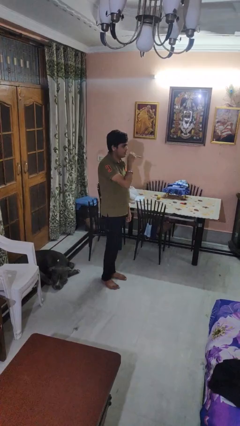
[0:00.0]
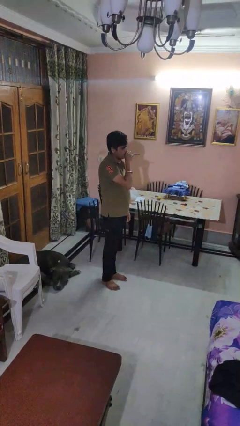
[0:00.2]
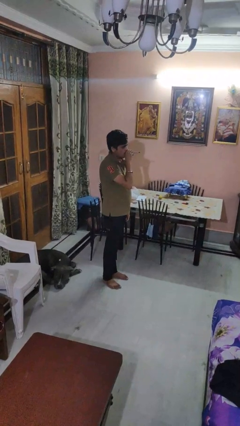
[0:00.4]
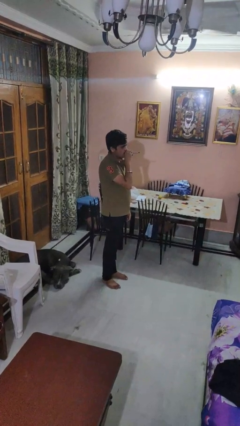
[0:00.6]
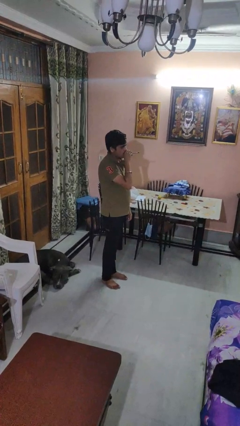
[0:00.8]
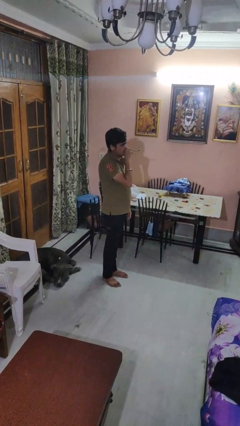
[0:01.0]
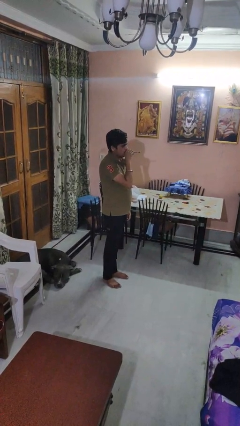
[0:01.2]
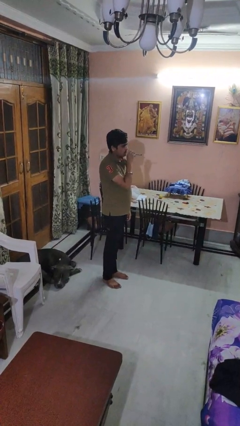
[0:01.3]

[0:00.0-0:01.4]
person vapes

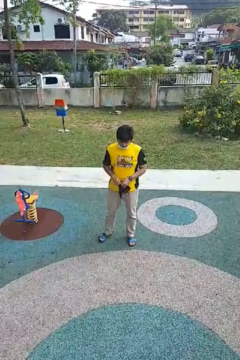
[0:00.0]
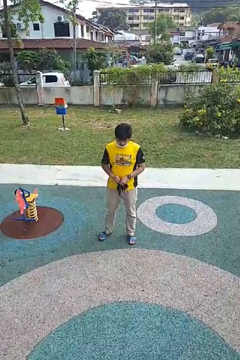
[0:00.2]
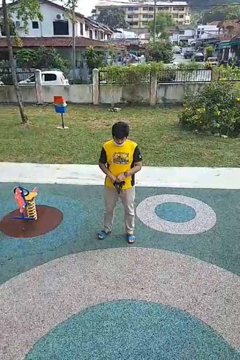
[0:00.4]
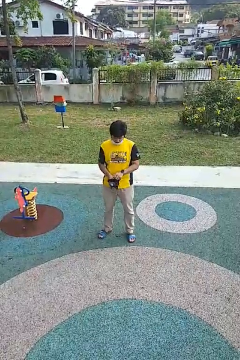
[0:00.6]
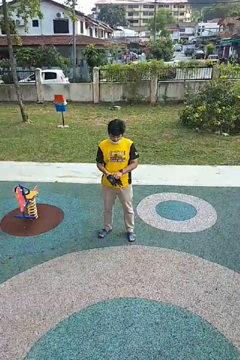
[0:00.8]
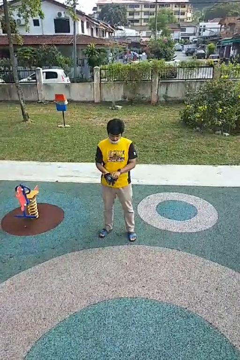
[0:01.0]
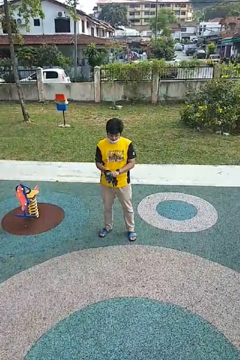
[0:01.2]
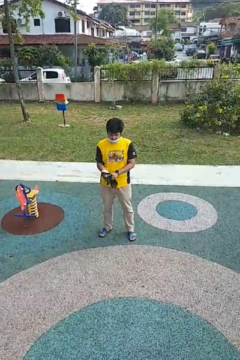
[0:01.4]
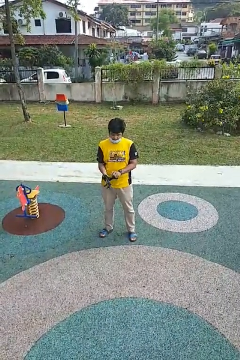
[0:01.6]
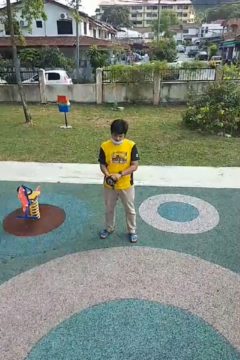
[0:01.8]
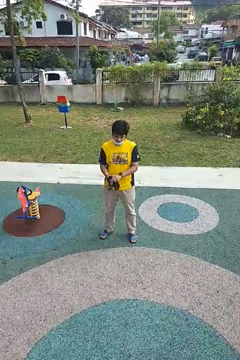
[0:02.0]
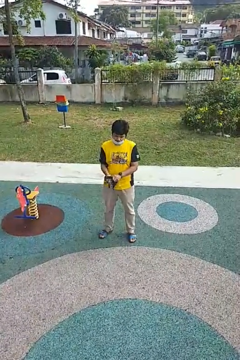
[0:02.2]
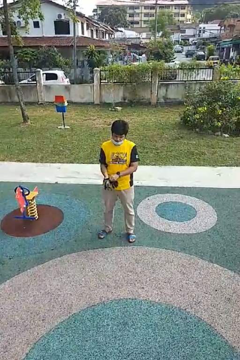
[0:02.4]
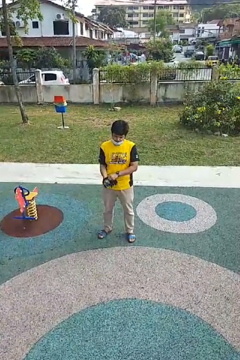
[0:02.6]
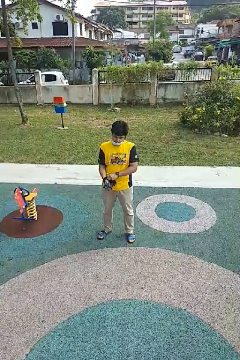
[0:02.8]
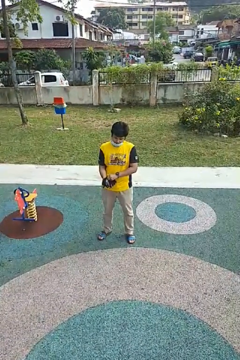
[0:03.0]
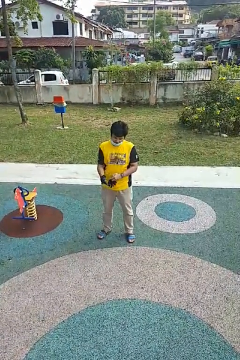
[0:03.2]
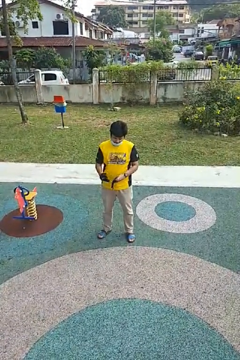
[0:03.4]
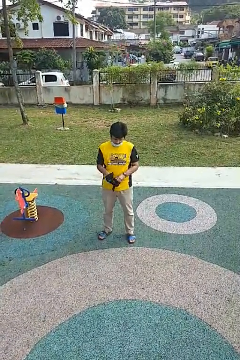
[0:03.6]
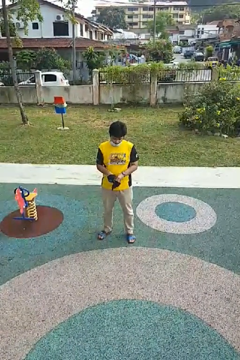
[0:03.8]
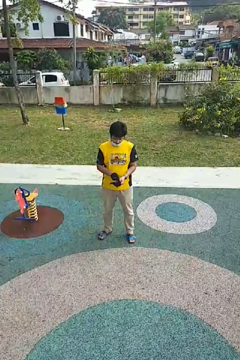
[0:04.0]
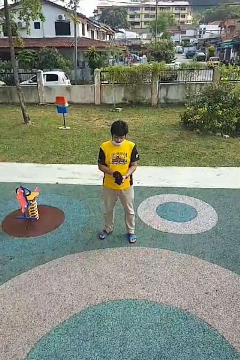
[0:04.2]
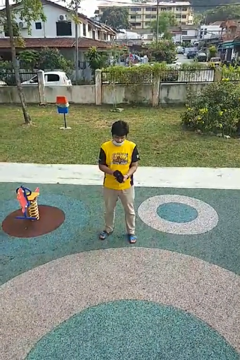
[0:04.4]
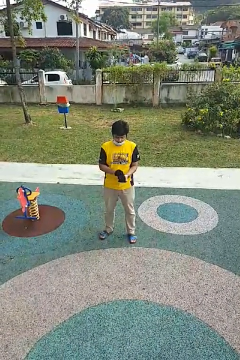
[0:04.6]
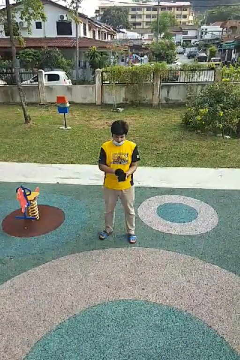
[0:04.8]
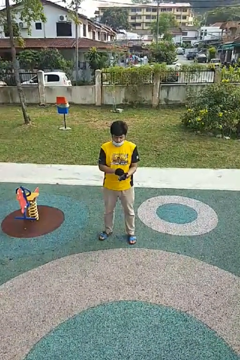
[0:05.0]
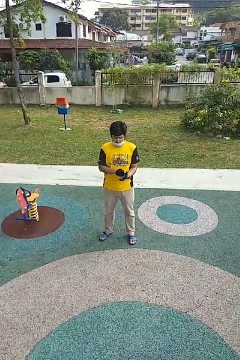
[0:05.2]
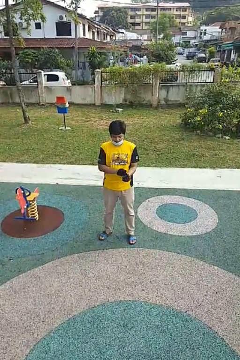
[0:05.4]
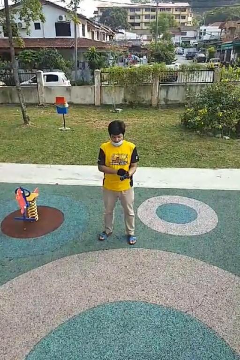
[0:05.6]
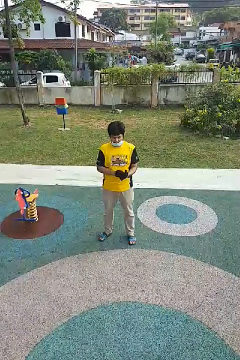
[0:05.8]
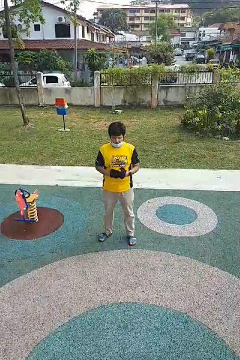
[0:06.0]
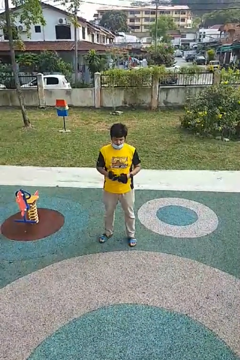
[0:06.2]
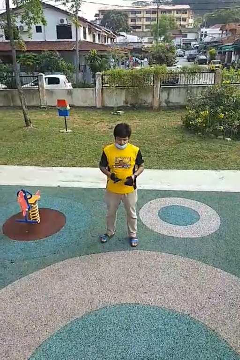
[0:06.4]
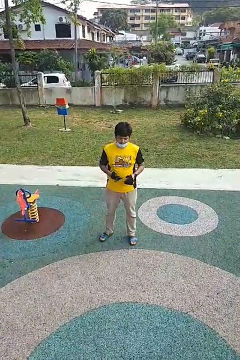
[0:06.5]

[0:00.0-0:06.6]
person puts on gloves

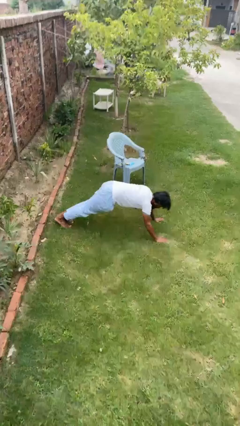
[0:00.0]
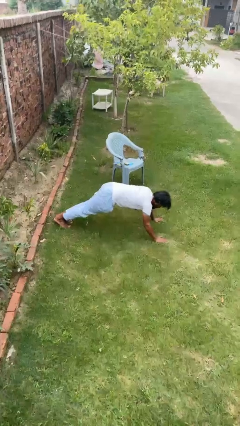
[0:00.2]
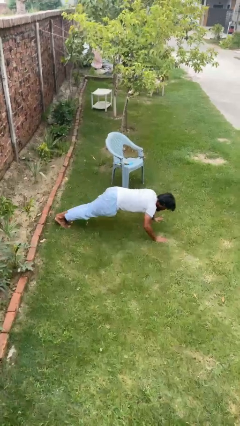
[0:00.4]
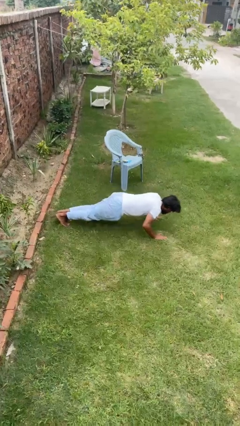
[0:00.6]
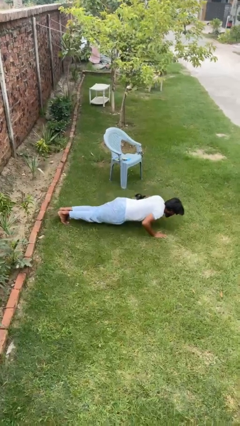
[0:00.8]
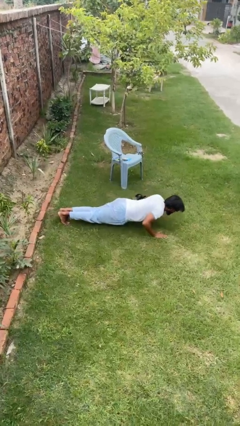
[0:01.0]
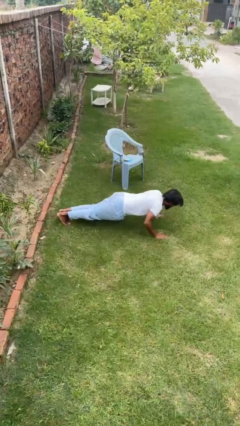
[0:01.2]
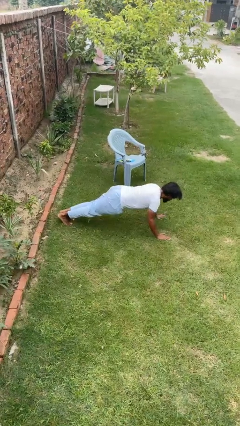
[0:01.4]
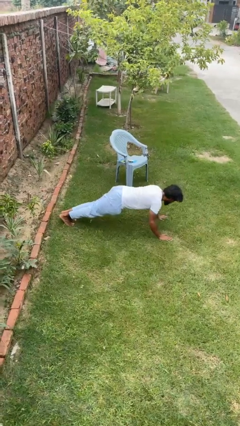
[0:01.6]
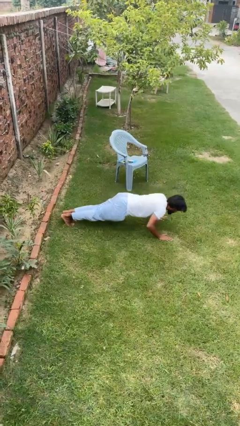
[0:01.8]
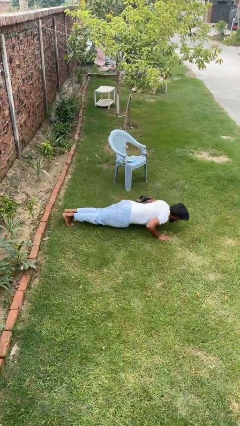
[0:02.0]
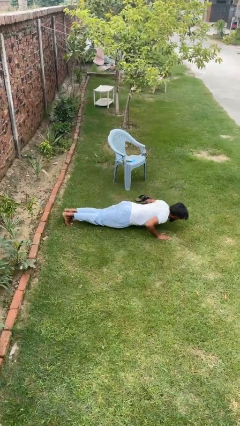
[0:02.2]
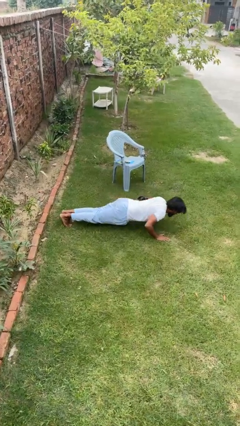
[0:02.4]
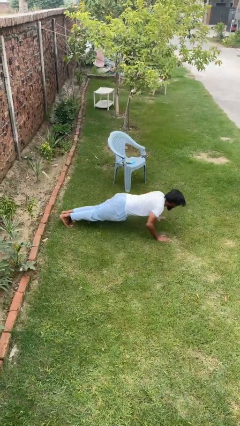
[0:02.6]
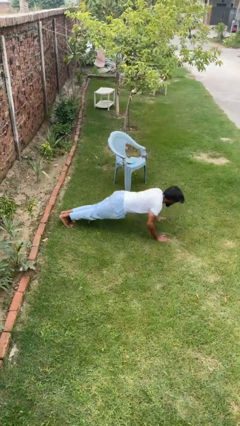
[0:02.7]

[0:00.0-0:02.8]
person exercises with pushup

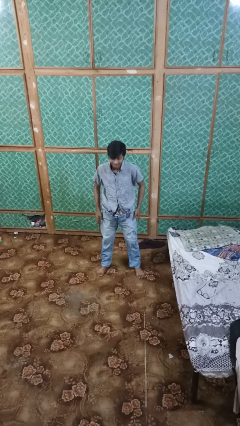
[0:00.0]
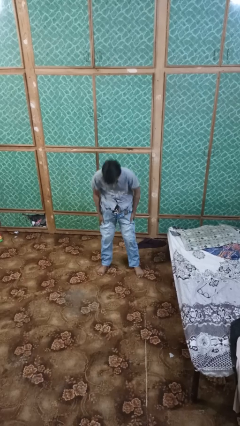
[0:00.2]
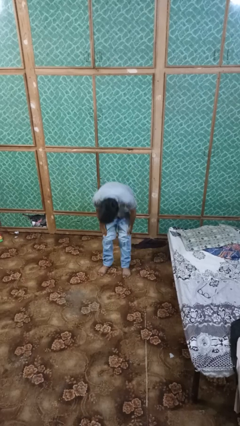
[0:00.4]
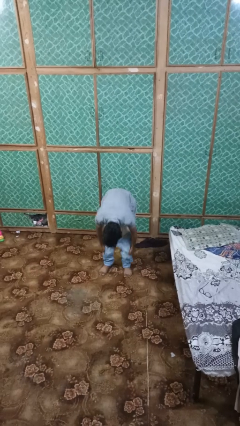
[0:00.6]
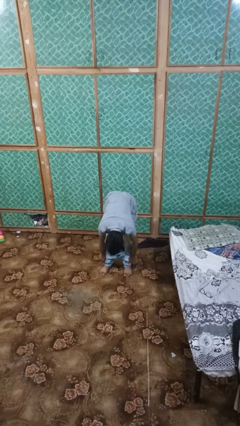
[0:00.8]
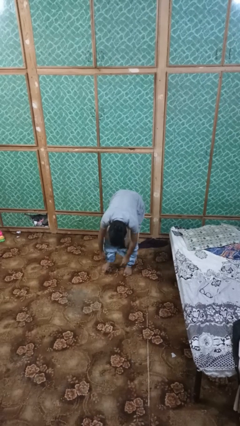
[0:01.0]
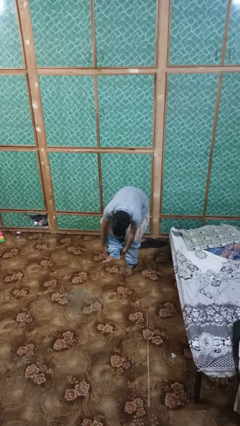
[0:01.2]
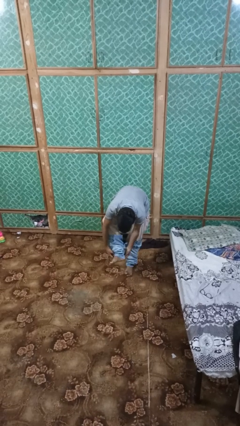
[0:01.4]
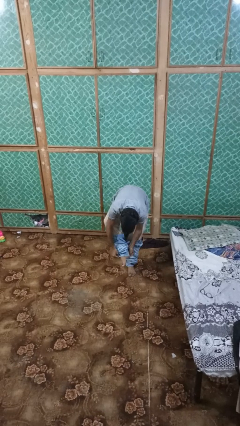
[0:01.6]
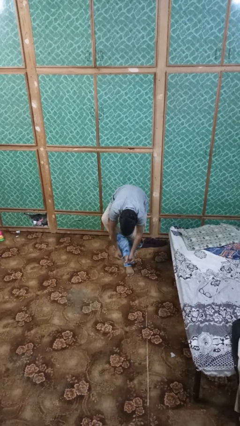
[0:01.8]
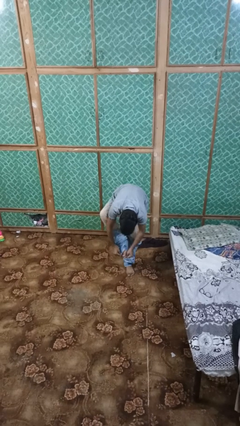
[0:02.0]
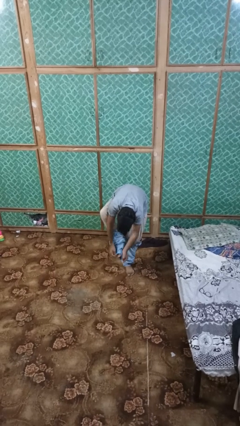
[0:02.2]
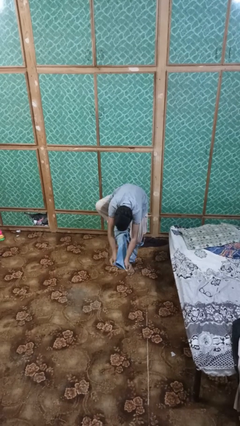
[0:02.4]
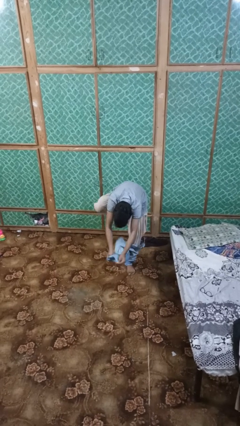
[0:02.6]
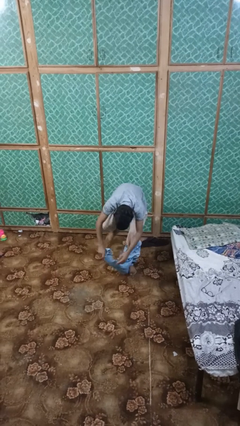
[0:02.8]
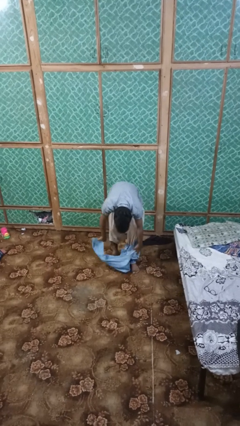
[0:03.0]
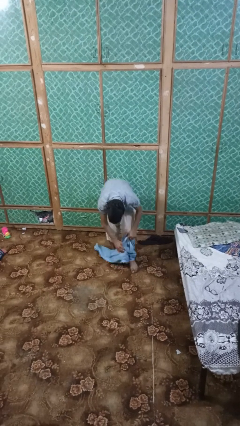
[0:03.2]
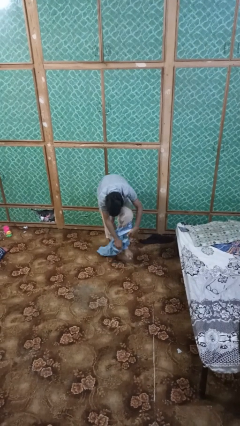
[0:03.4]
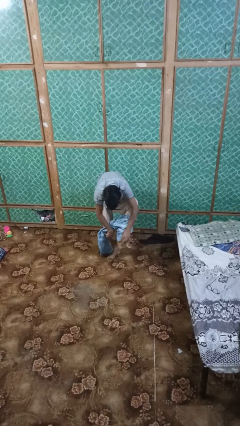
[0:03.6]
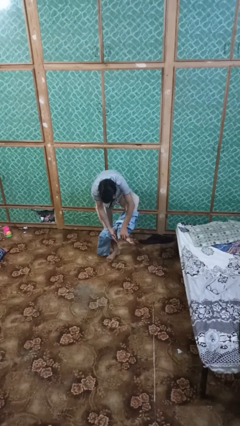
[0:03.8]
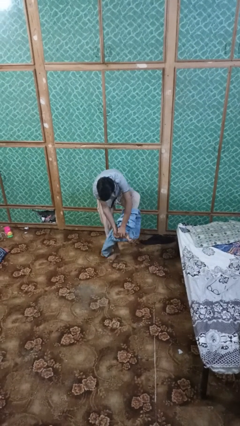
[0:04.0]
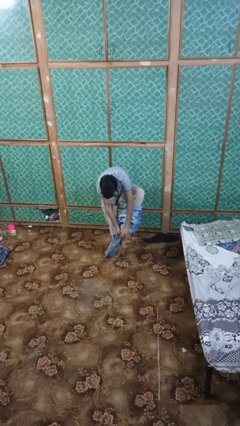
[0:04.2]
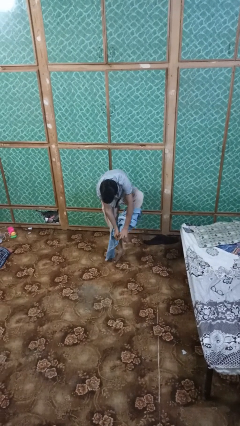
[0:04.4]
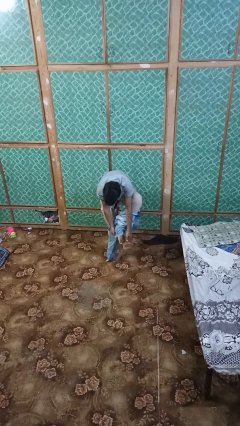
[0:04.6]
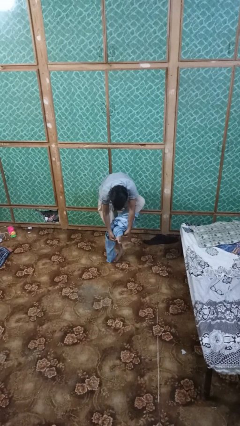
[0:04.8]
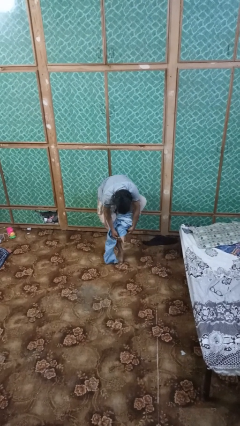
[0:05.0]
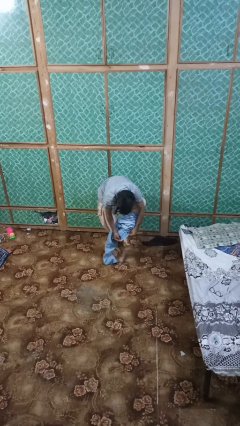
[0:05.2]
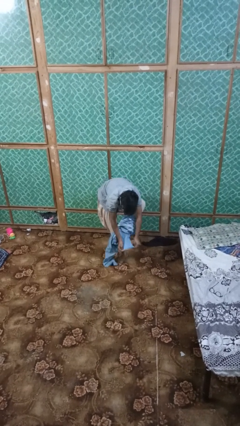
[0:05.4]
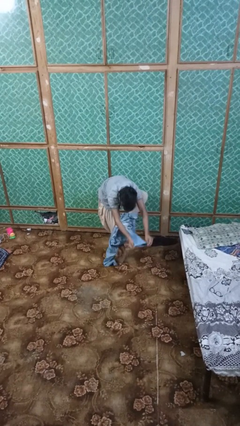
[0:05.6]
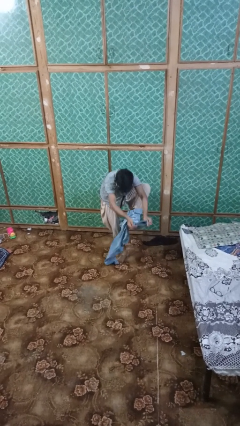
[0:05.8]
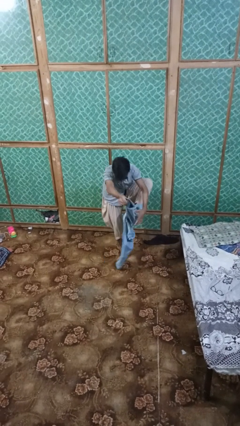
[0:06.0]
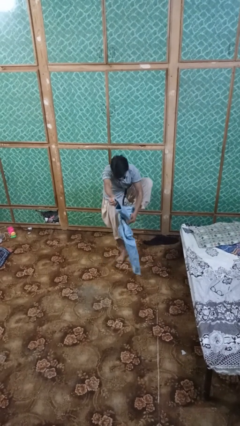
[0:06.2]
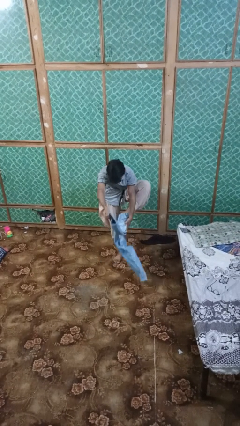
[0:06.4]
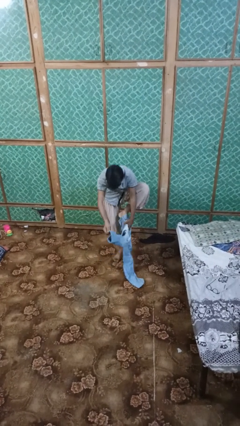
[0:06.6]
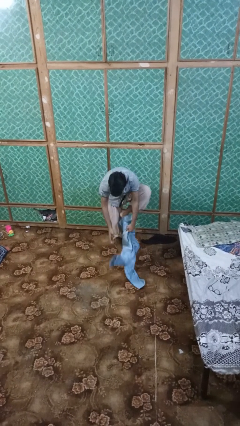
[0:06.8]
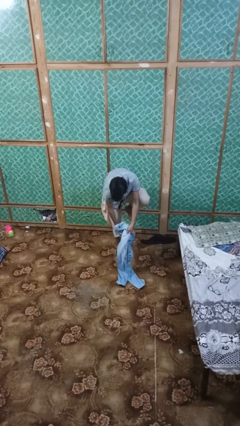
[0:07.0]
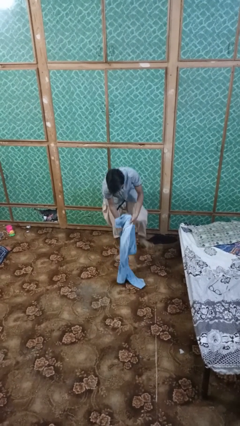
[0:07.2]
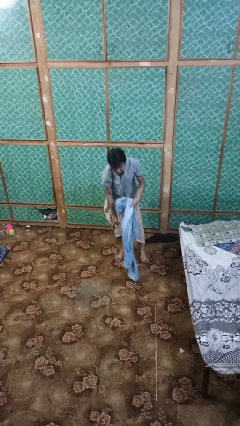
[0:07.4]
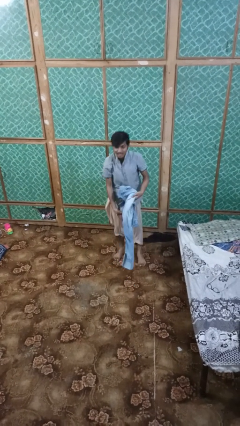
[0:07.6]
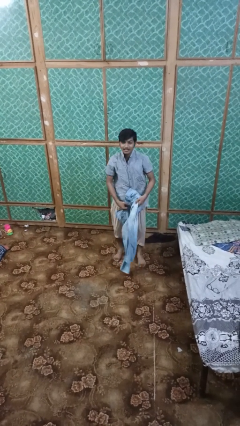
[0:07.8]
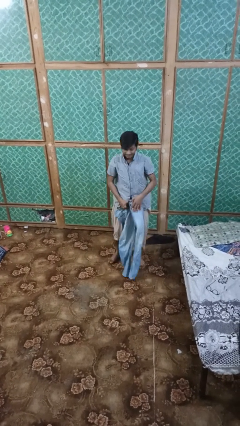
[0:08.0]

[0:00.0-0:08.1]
person takes off pants

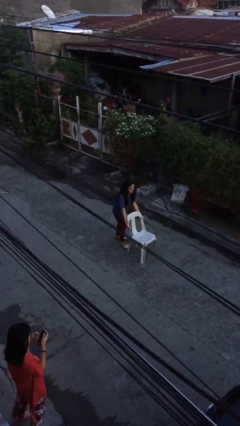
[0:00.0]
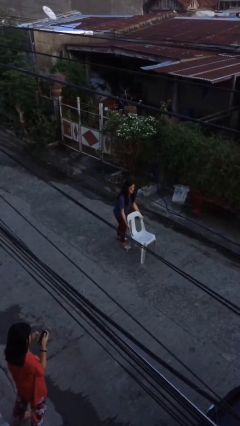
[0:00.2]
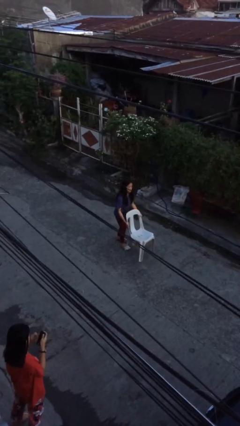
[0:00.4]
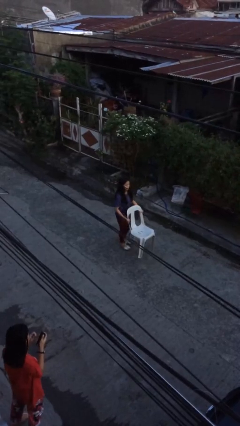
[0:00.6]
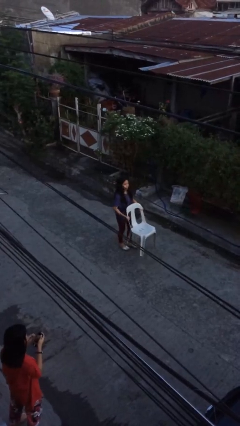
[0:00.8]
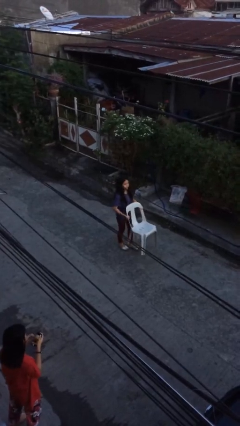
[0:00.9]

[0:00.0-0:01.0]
person picks up object from floor
